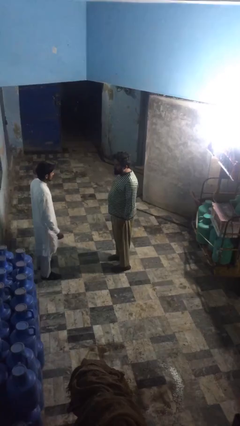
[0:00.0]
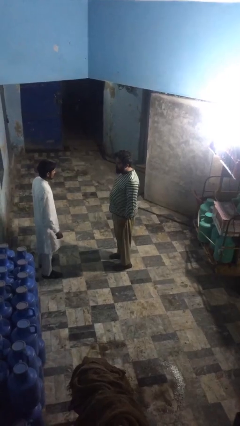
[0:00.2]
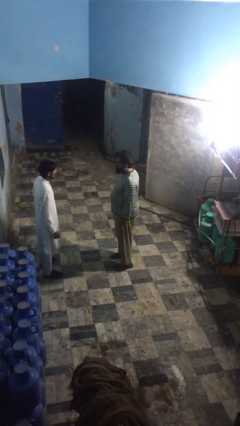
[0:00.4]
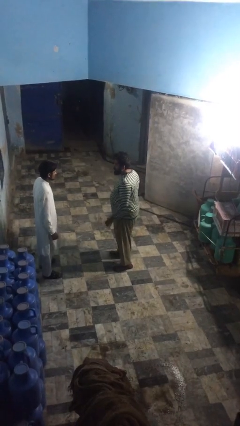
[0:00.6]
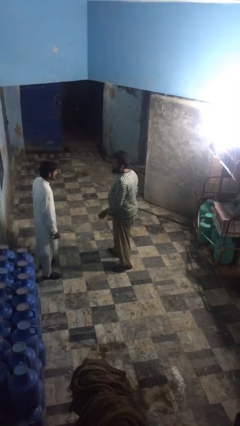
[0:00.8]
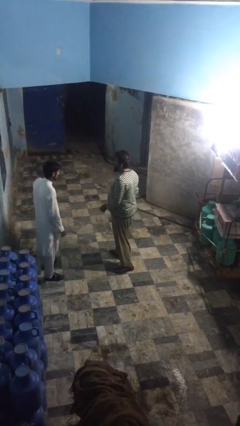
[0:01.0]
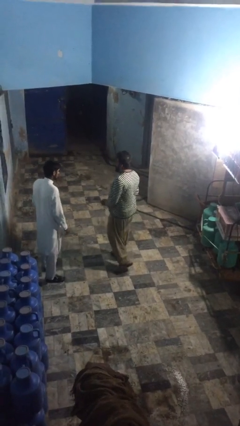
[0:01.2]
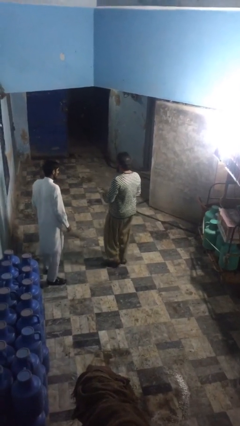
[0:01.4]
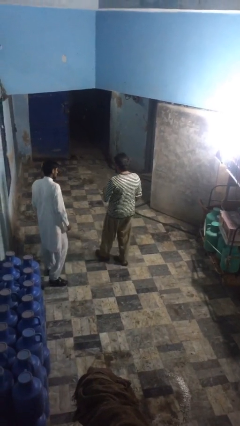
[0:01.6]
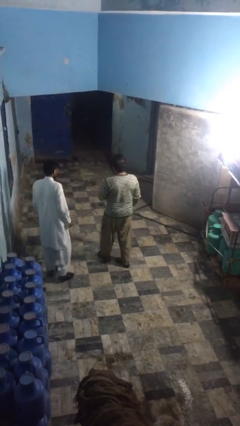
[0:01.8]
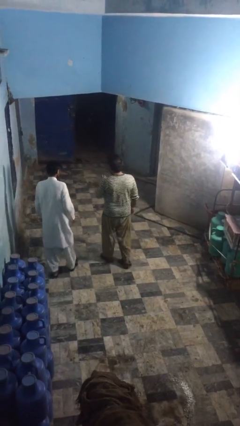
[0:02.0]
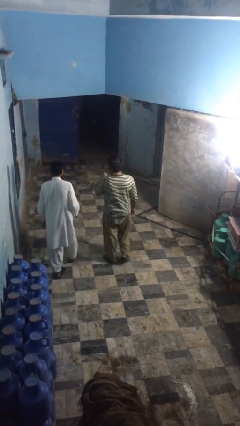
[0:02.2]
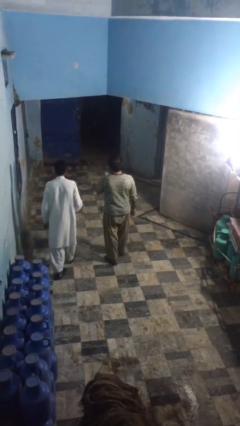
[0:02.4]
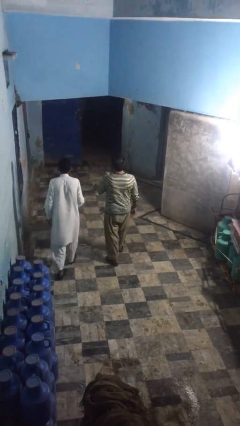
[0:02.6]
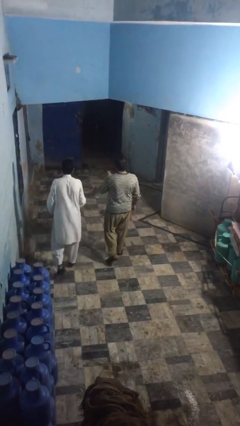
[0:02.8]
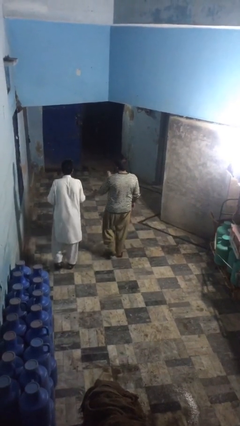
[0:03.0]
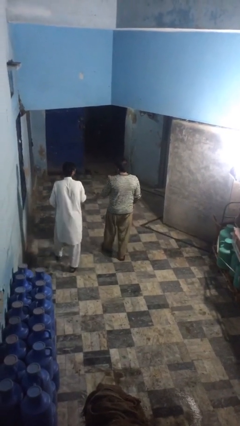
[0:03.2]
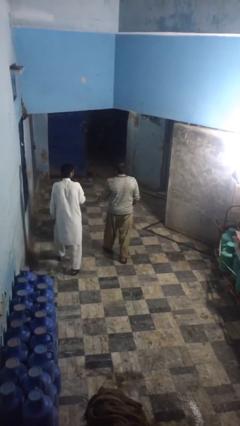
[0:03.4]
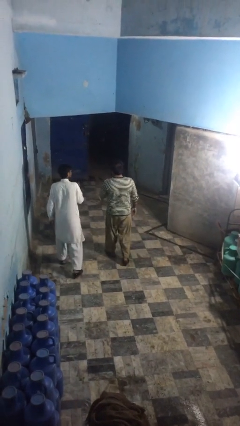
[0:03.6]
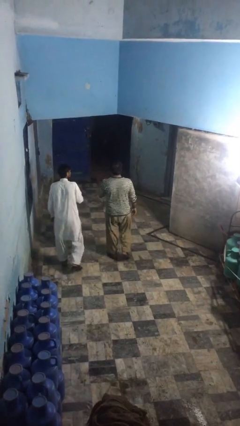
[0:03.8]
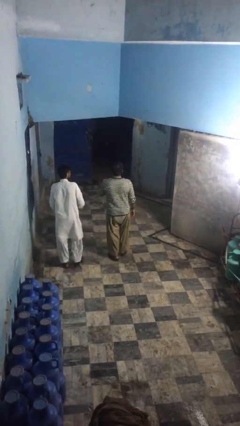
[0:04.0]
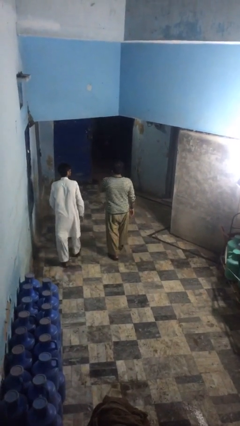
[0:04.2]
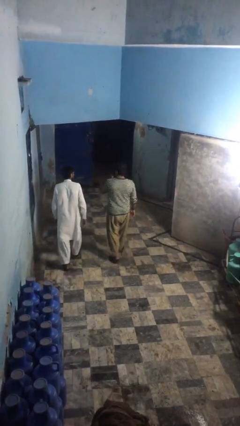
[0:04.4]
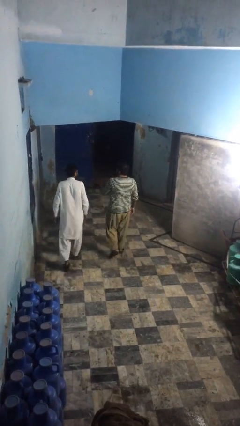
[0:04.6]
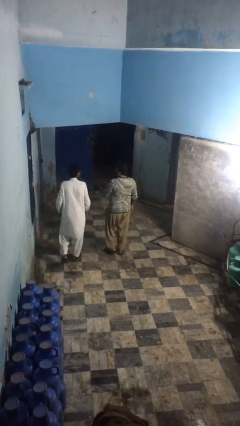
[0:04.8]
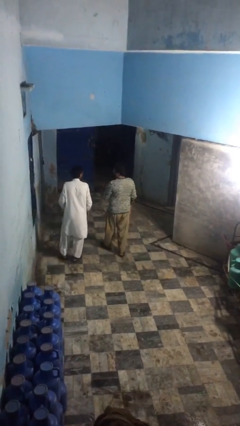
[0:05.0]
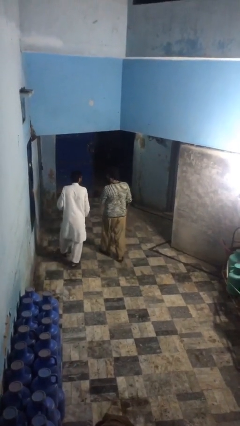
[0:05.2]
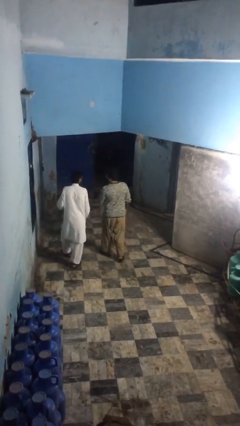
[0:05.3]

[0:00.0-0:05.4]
person talks to person

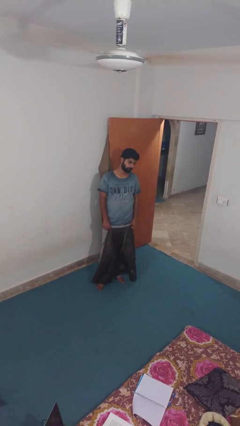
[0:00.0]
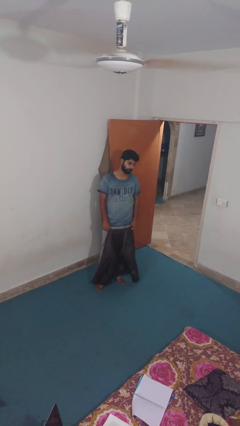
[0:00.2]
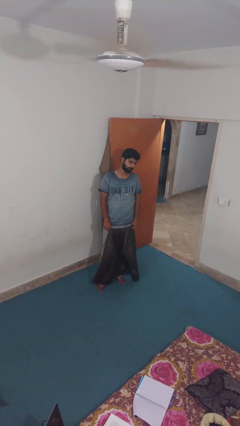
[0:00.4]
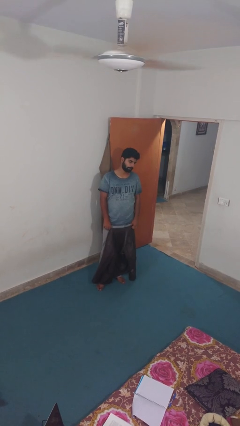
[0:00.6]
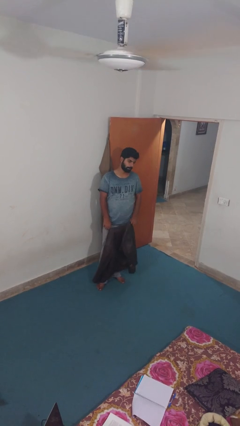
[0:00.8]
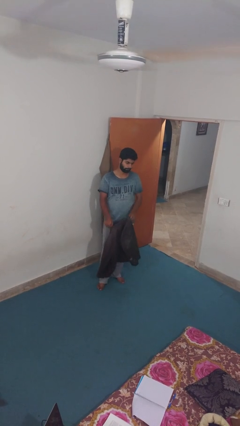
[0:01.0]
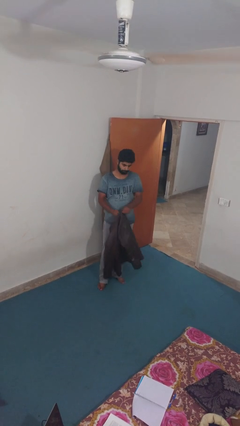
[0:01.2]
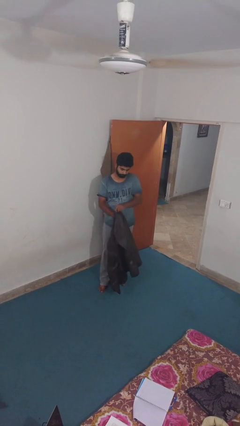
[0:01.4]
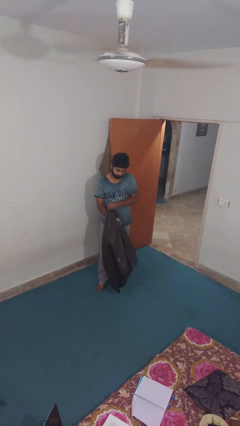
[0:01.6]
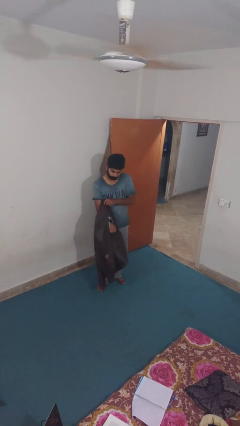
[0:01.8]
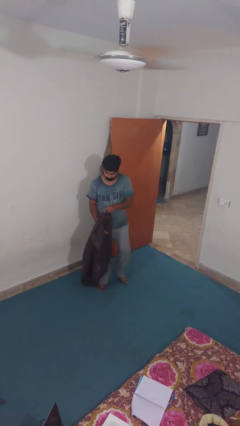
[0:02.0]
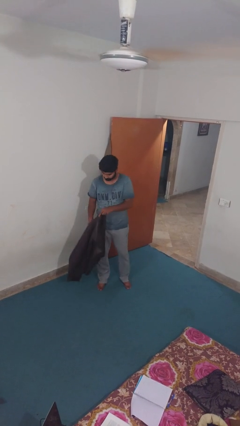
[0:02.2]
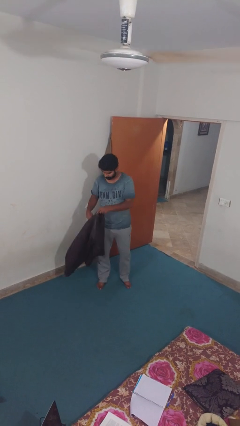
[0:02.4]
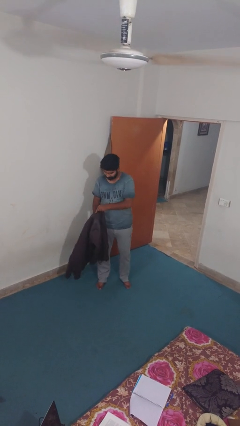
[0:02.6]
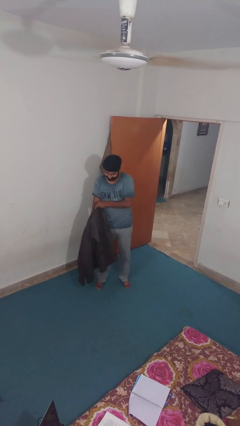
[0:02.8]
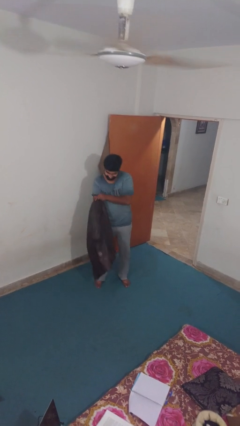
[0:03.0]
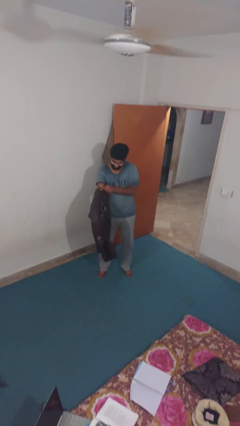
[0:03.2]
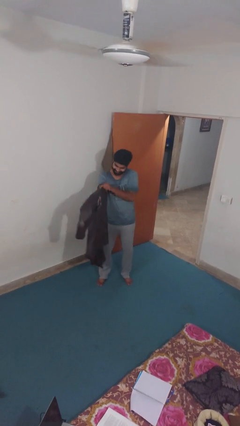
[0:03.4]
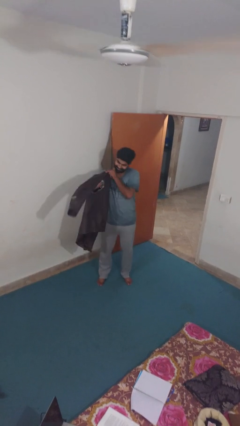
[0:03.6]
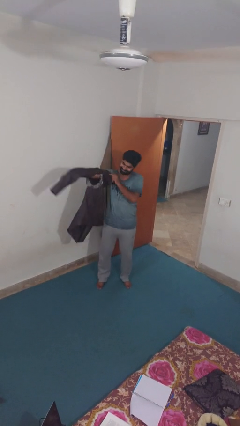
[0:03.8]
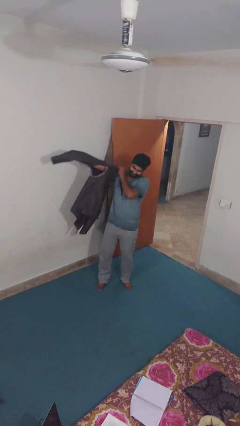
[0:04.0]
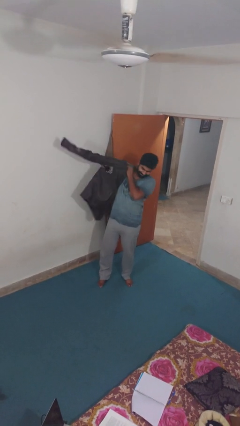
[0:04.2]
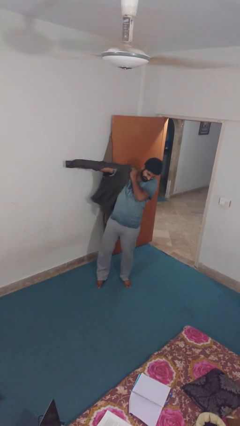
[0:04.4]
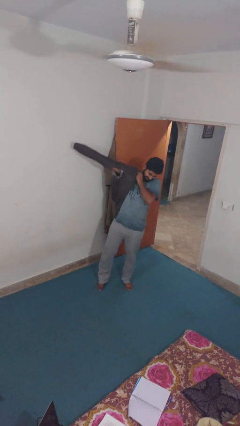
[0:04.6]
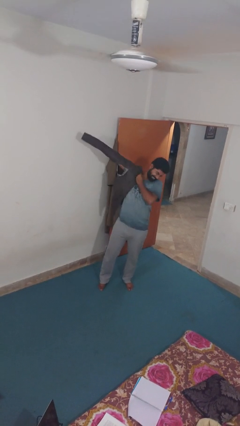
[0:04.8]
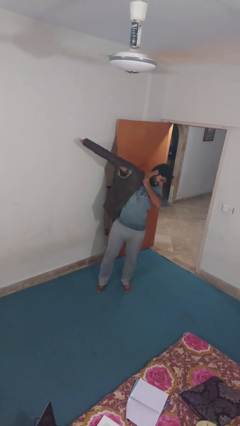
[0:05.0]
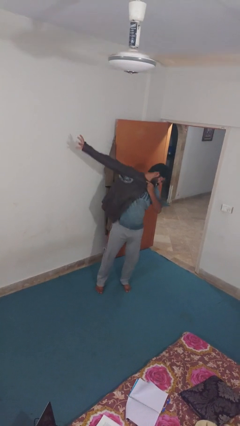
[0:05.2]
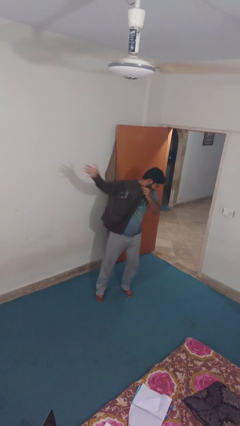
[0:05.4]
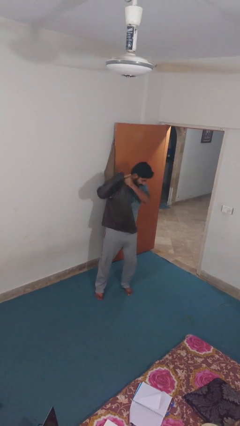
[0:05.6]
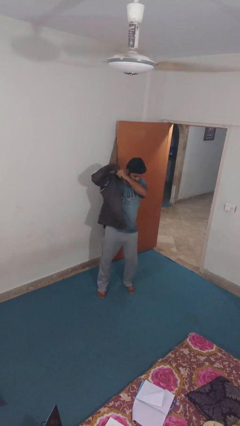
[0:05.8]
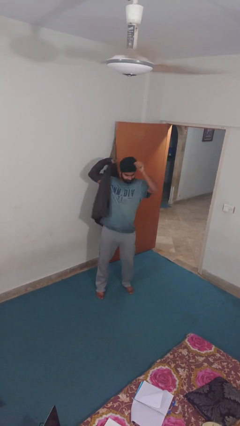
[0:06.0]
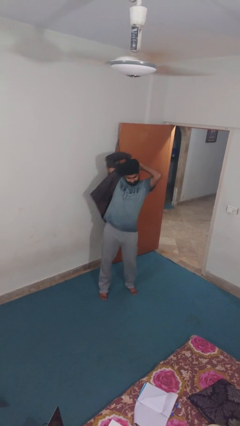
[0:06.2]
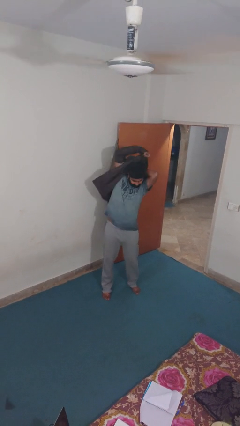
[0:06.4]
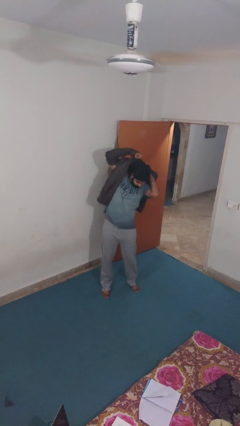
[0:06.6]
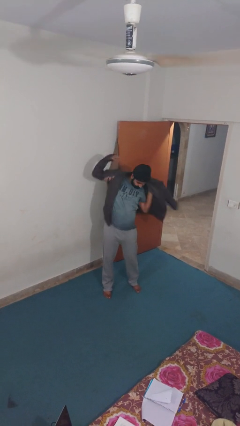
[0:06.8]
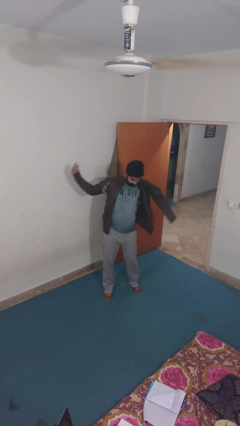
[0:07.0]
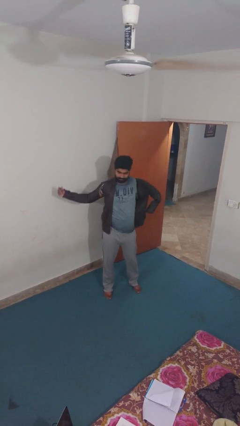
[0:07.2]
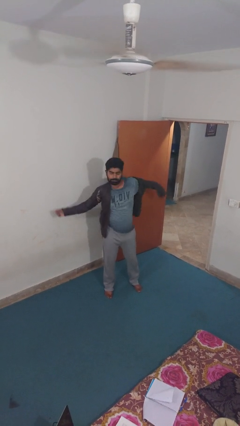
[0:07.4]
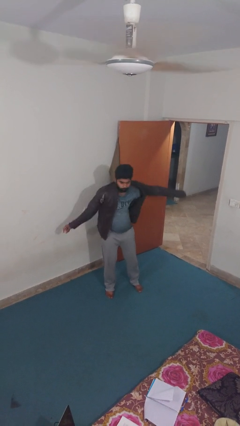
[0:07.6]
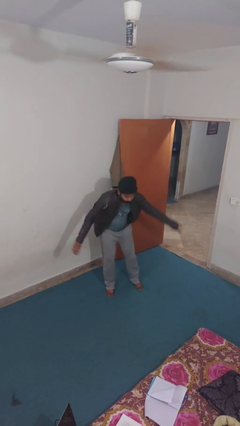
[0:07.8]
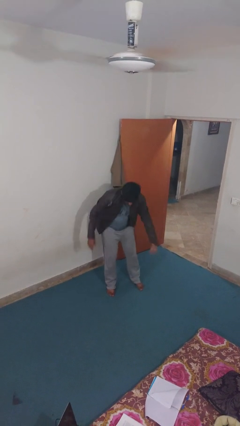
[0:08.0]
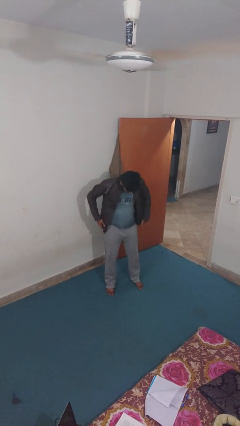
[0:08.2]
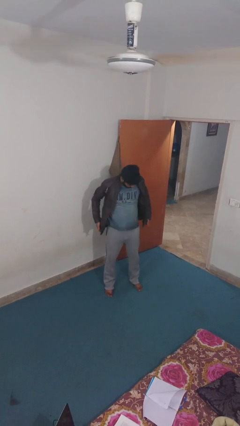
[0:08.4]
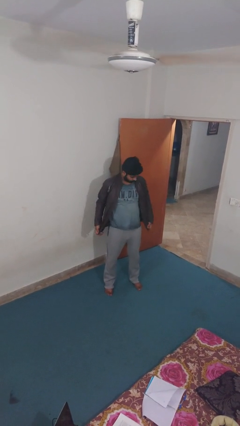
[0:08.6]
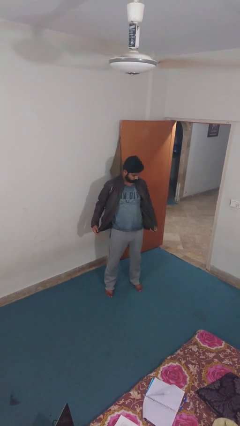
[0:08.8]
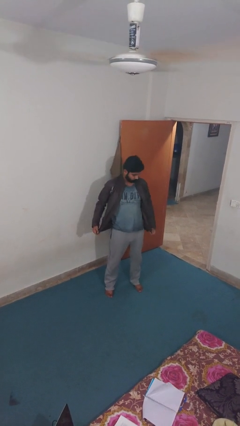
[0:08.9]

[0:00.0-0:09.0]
person puts on jacket

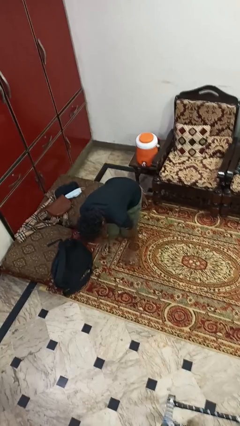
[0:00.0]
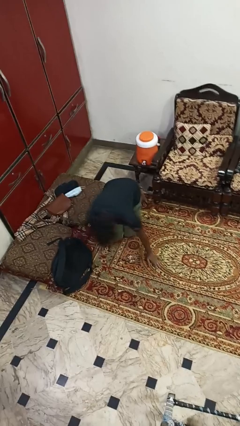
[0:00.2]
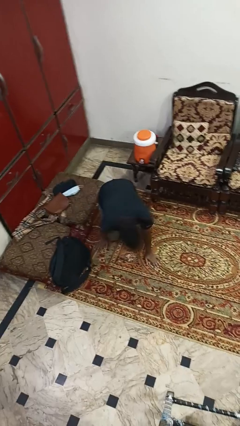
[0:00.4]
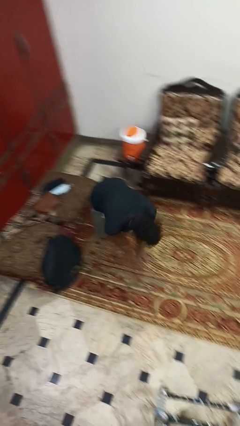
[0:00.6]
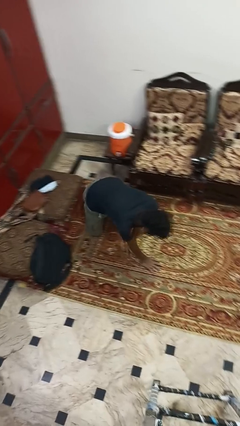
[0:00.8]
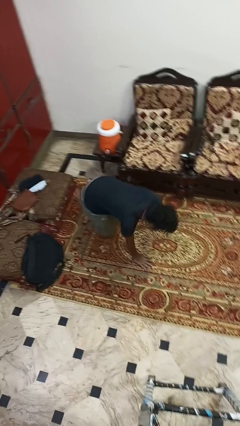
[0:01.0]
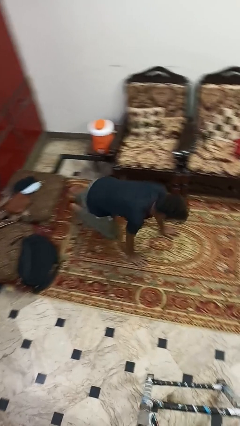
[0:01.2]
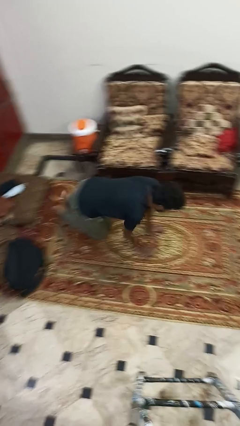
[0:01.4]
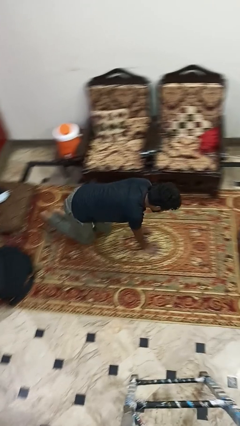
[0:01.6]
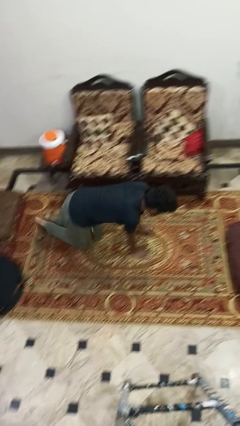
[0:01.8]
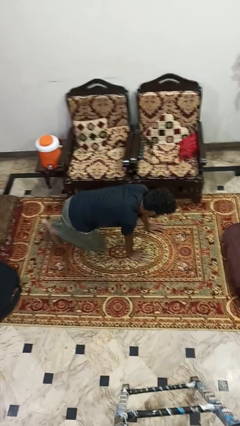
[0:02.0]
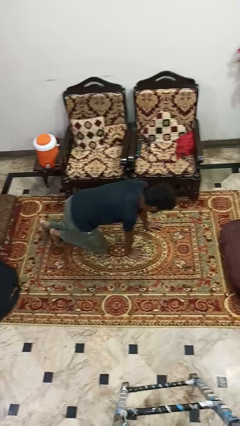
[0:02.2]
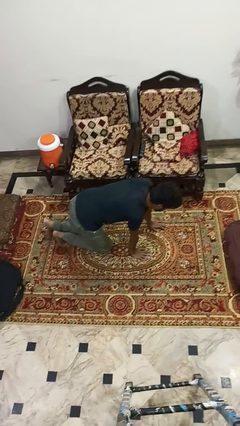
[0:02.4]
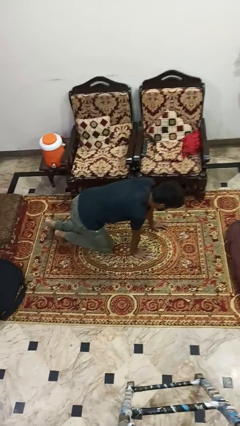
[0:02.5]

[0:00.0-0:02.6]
person crawls

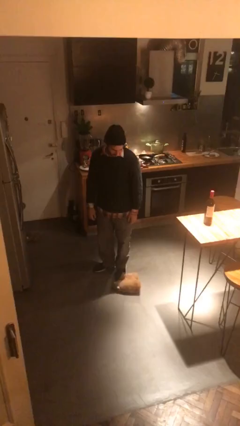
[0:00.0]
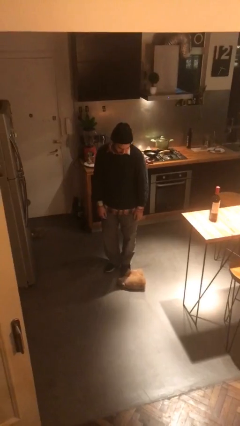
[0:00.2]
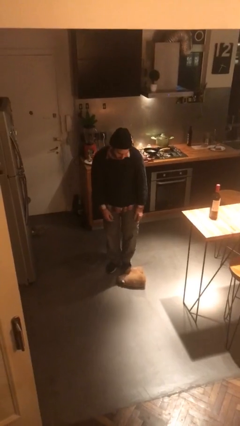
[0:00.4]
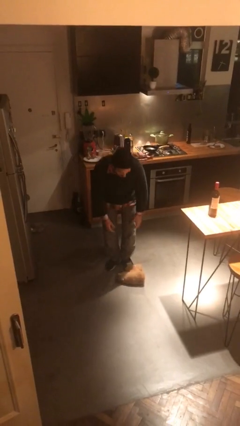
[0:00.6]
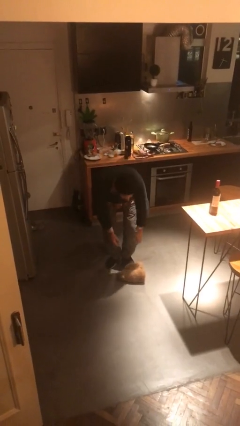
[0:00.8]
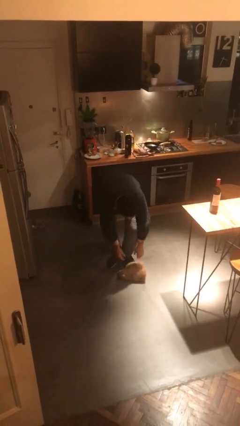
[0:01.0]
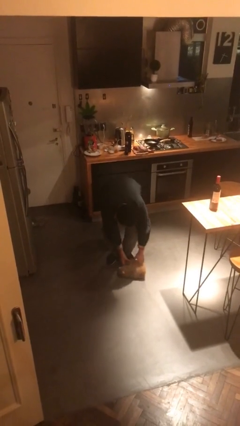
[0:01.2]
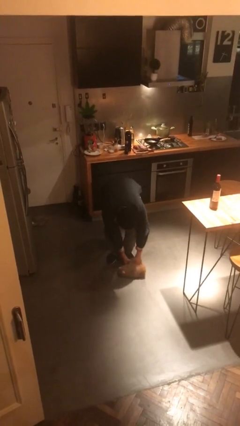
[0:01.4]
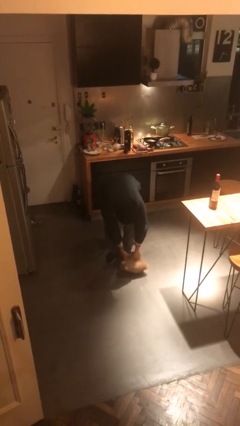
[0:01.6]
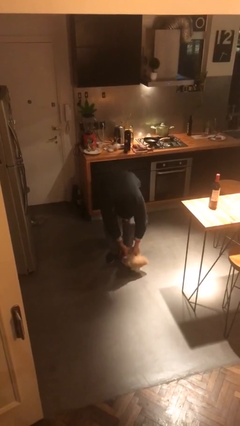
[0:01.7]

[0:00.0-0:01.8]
person picks up object from floor
